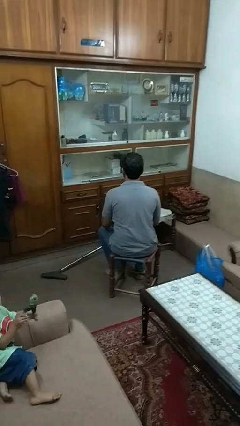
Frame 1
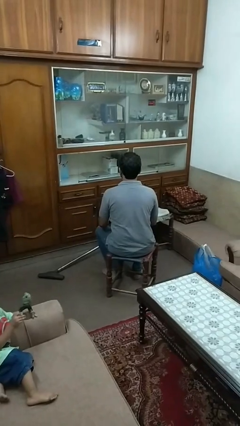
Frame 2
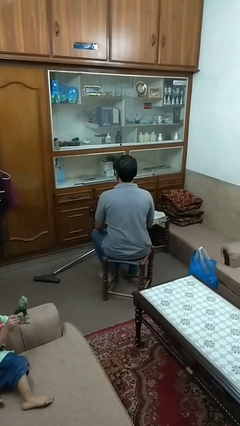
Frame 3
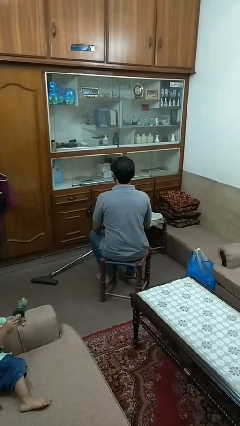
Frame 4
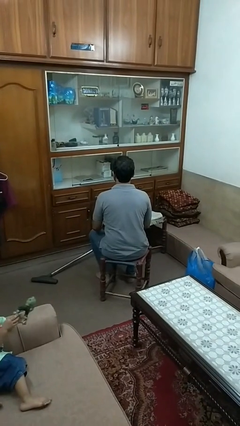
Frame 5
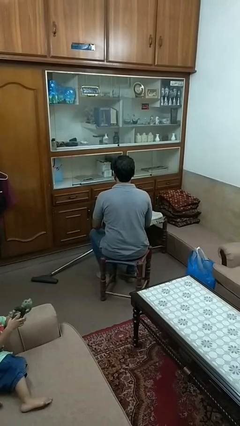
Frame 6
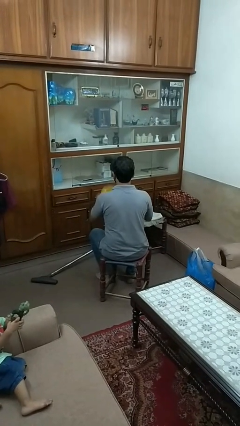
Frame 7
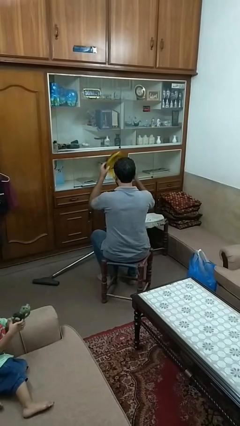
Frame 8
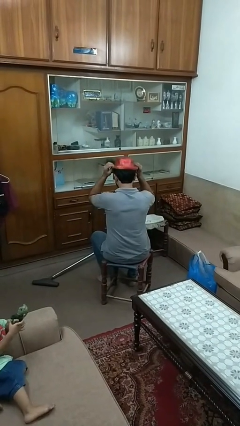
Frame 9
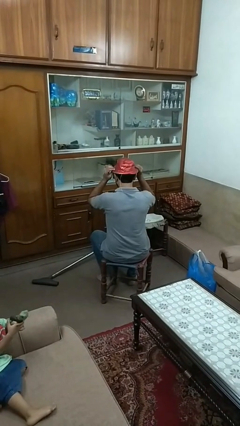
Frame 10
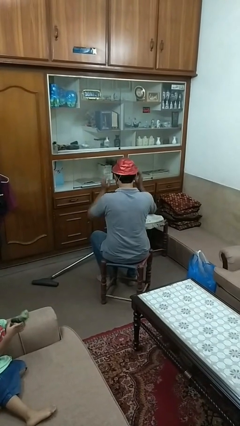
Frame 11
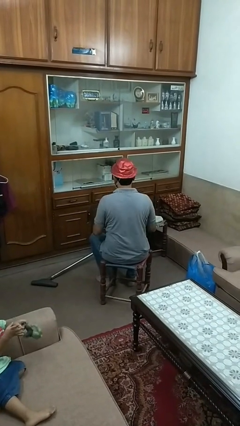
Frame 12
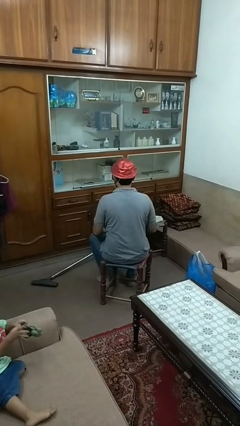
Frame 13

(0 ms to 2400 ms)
person puts on hat

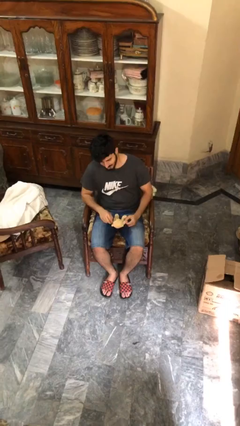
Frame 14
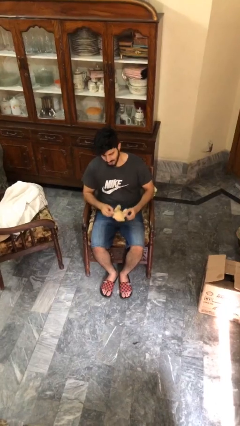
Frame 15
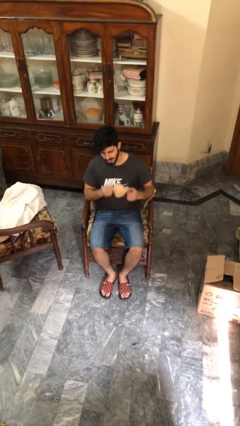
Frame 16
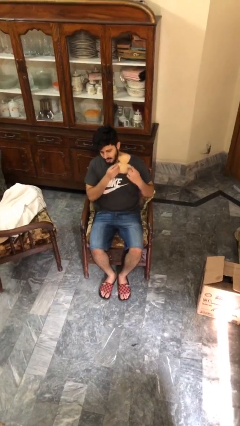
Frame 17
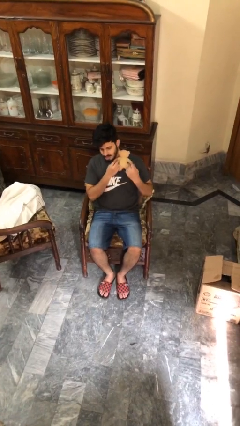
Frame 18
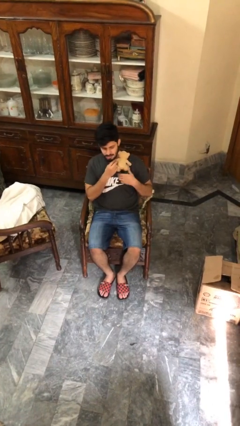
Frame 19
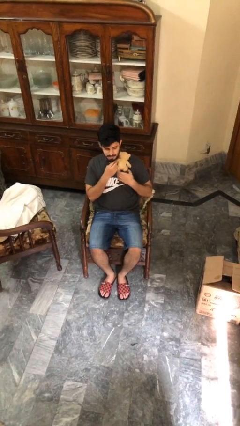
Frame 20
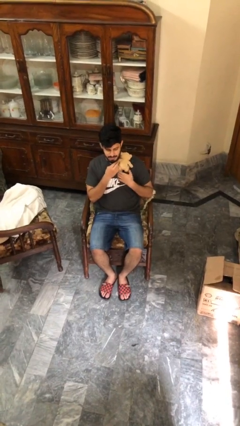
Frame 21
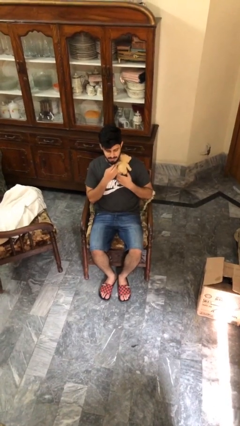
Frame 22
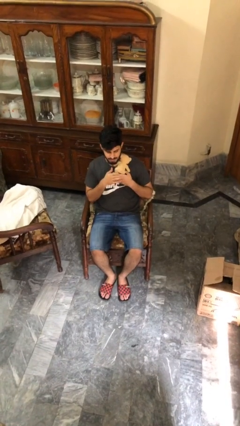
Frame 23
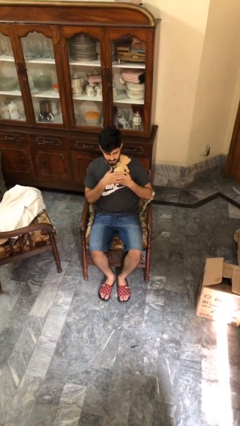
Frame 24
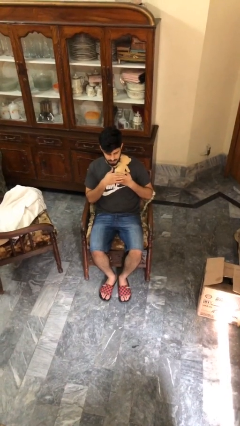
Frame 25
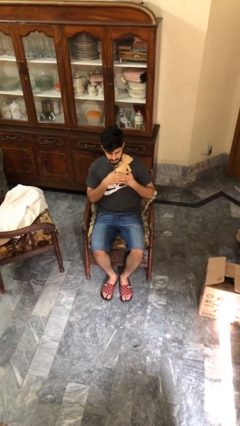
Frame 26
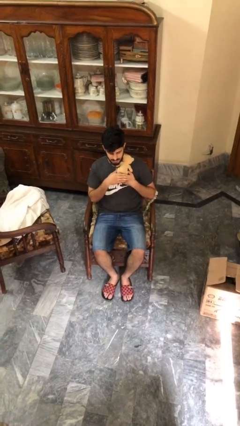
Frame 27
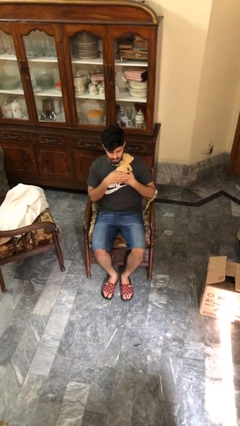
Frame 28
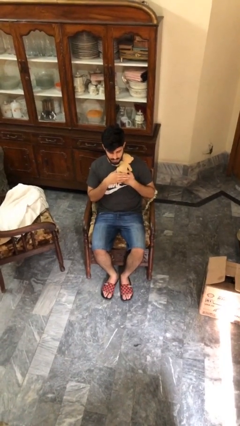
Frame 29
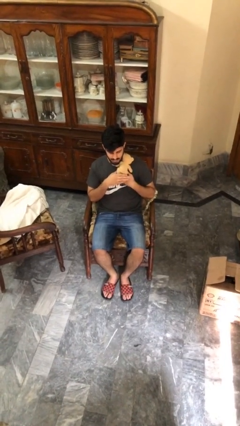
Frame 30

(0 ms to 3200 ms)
person hugs stuffed animal

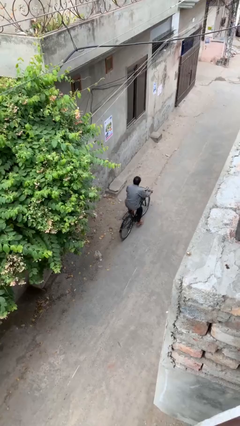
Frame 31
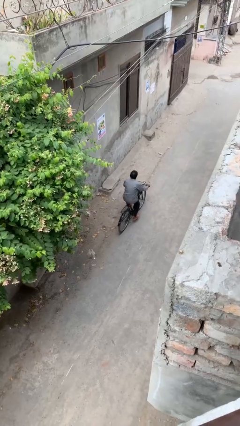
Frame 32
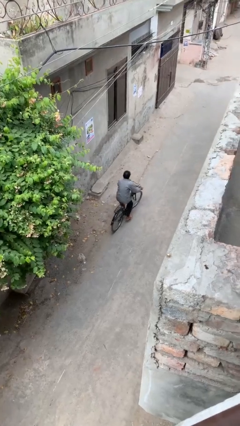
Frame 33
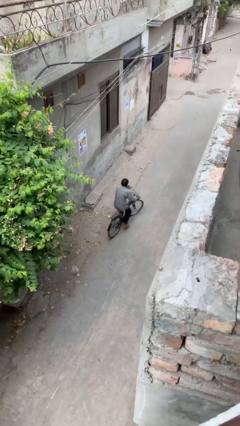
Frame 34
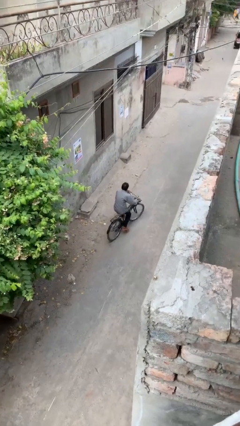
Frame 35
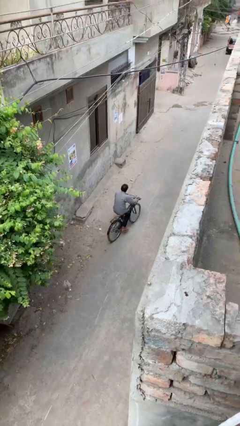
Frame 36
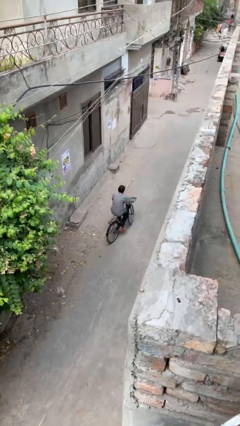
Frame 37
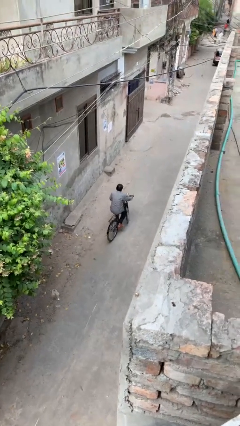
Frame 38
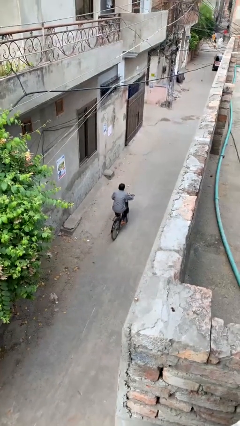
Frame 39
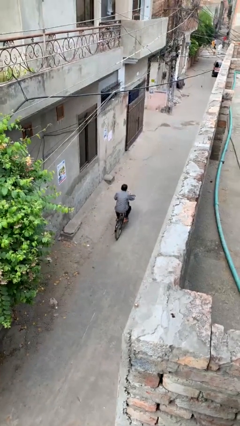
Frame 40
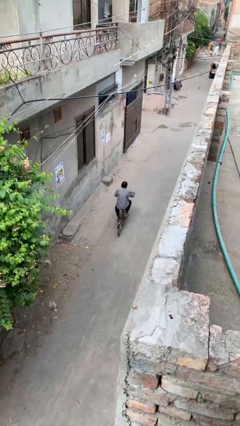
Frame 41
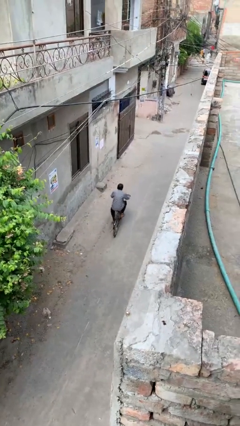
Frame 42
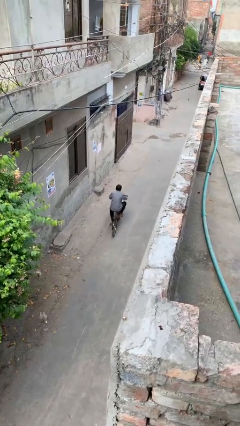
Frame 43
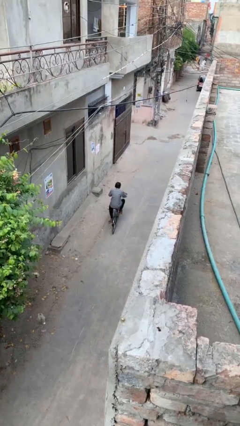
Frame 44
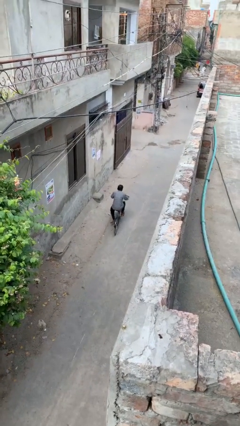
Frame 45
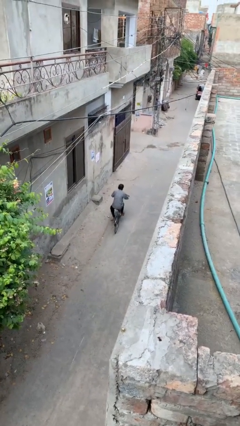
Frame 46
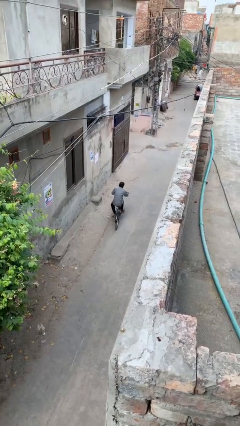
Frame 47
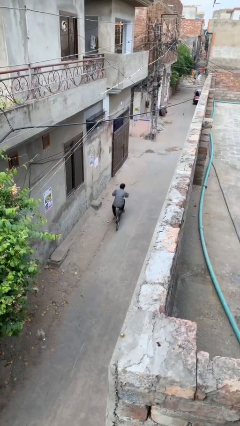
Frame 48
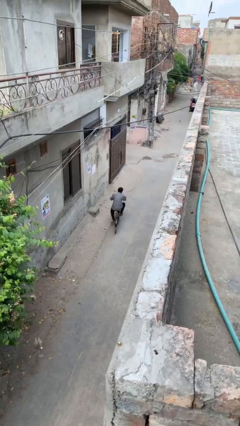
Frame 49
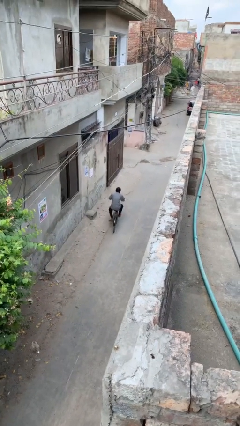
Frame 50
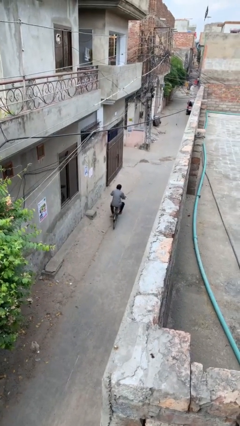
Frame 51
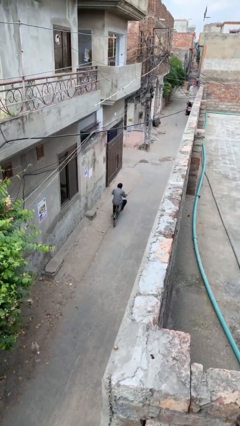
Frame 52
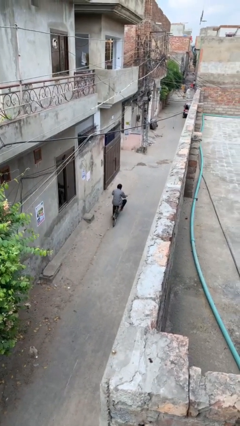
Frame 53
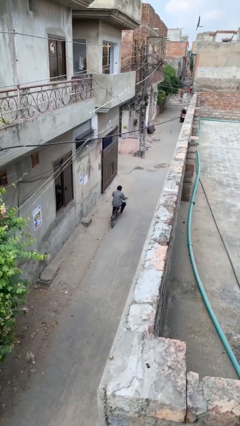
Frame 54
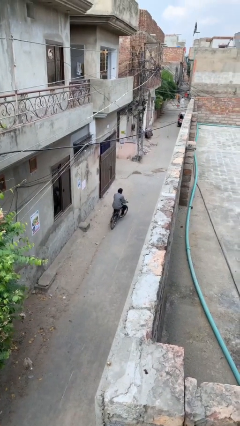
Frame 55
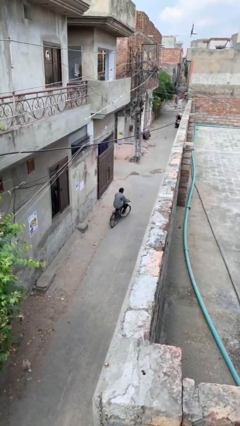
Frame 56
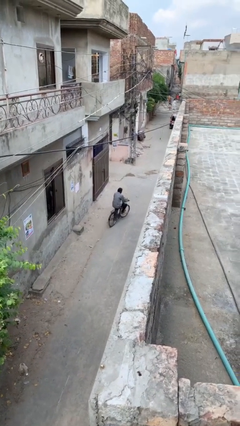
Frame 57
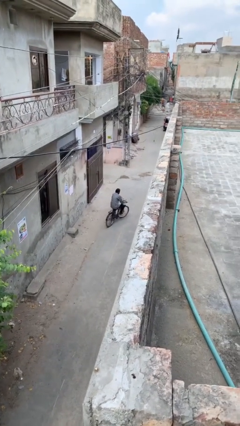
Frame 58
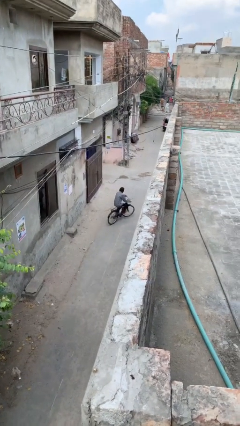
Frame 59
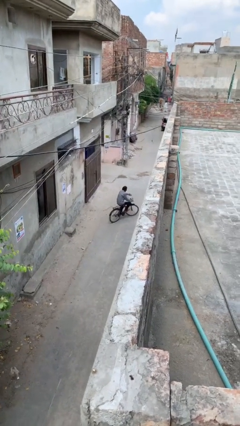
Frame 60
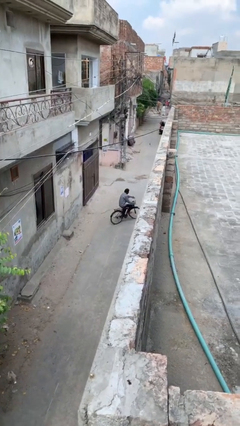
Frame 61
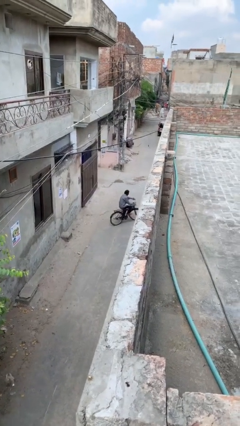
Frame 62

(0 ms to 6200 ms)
person rides bicycle

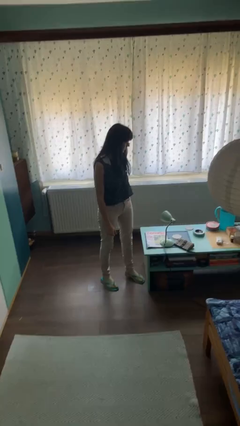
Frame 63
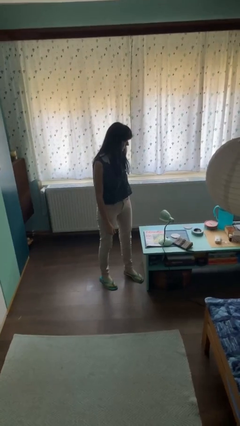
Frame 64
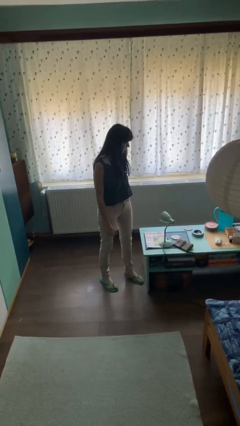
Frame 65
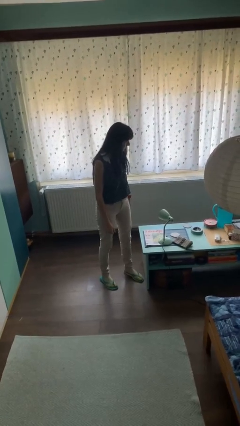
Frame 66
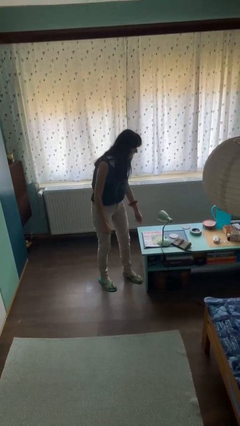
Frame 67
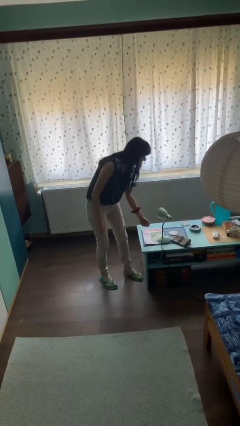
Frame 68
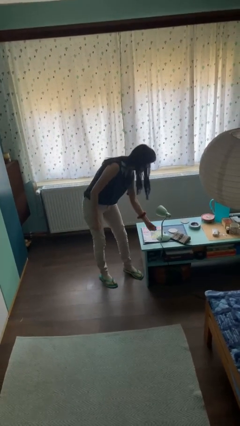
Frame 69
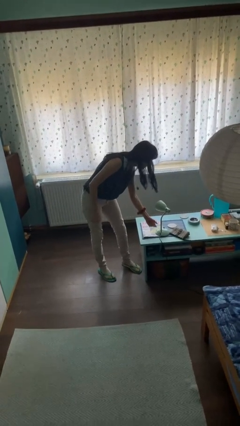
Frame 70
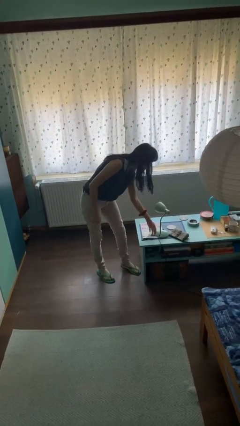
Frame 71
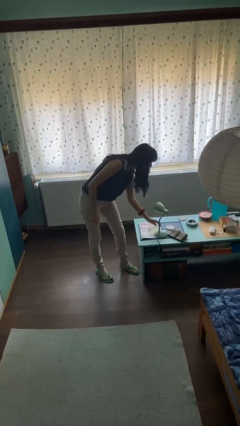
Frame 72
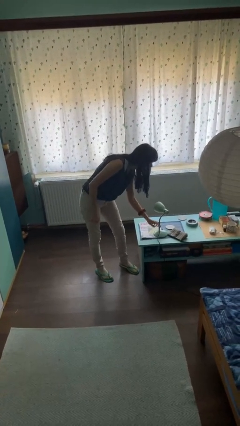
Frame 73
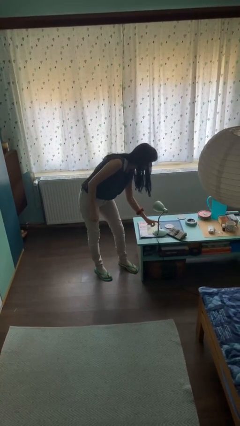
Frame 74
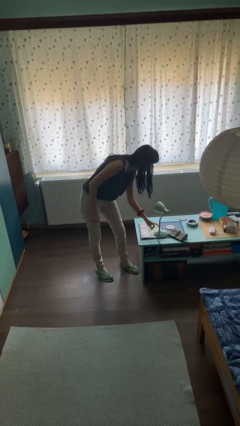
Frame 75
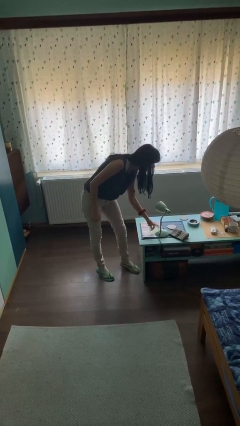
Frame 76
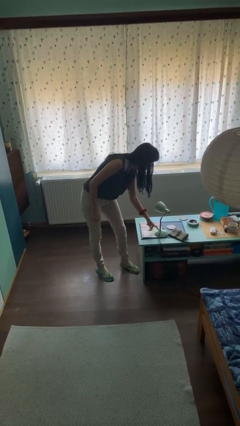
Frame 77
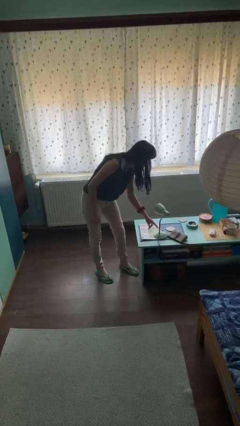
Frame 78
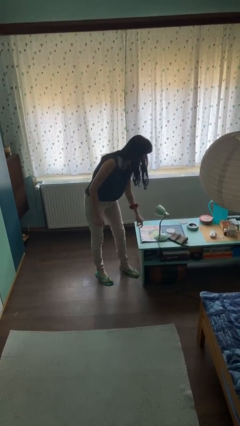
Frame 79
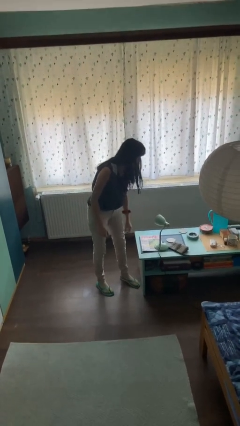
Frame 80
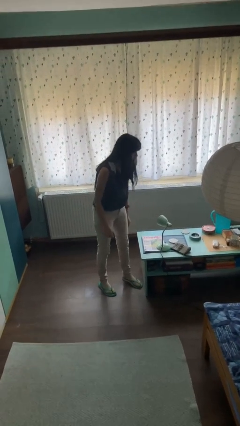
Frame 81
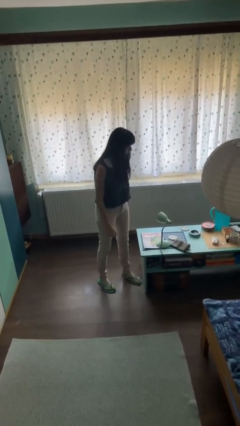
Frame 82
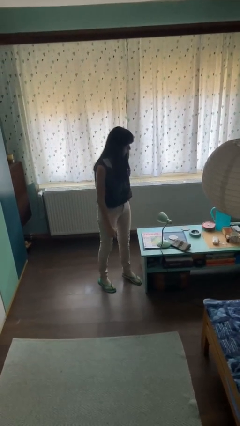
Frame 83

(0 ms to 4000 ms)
person taps object with finger

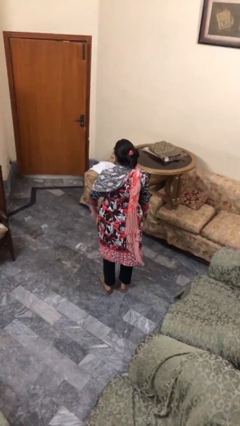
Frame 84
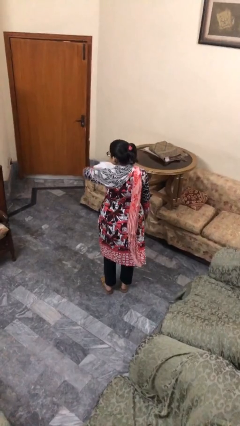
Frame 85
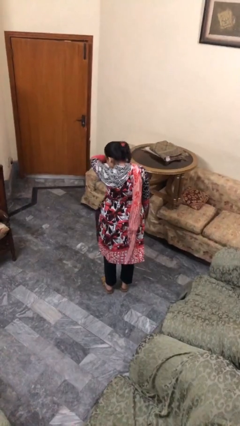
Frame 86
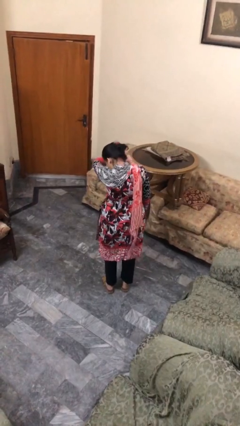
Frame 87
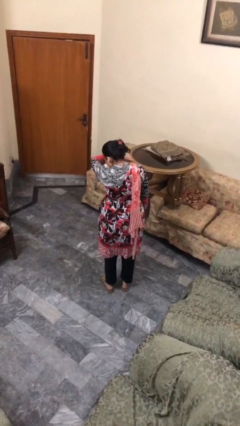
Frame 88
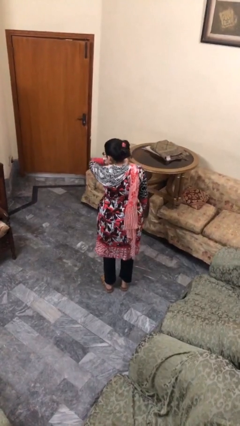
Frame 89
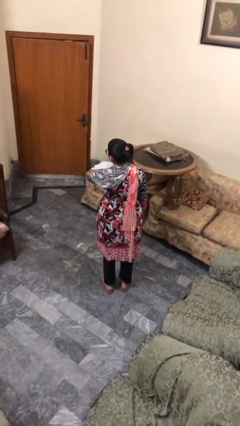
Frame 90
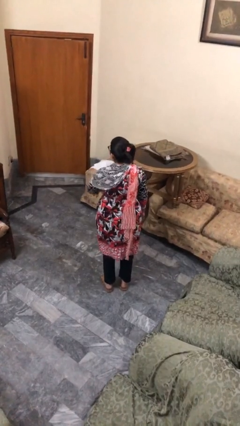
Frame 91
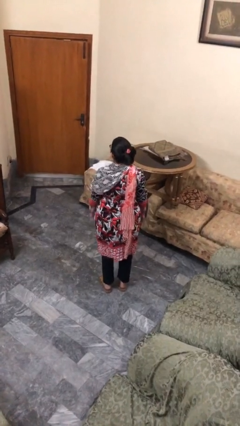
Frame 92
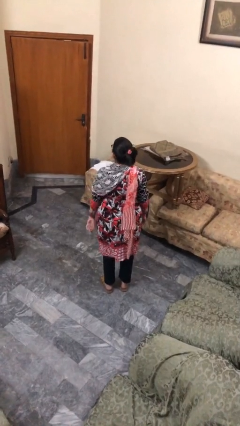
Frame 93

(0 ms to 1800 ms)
person sneezes into arm
